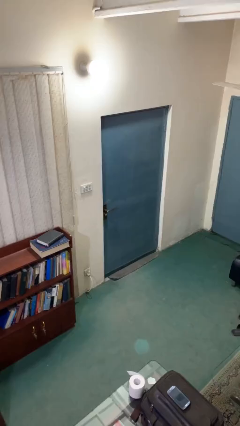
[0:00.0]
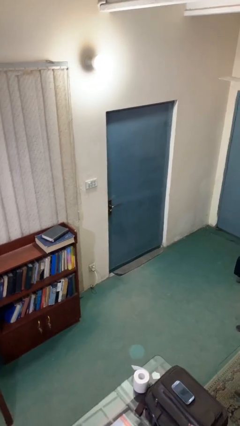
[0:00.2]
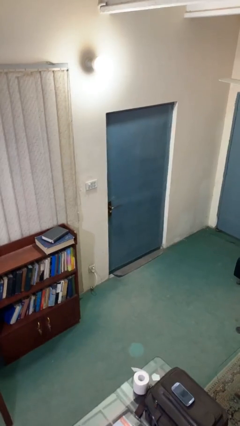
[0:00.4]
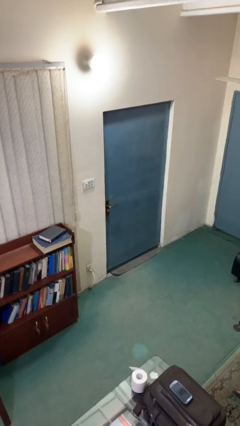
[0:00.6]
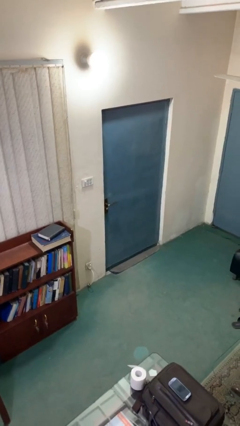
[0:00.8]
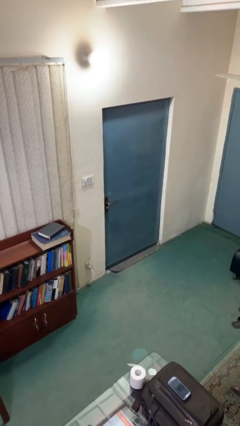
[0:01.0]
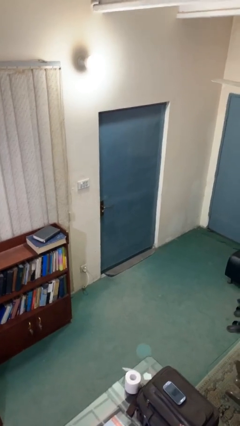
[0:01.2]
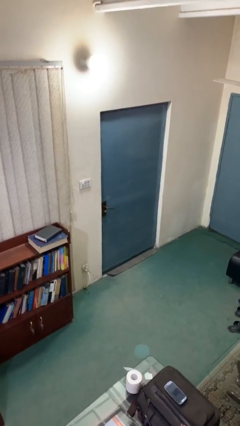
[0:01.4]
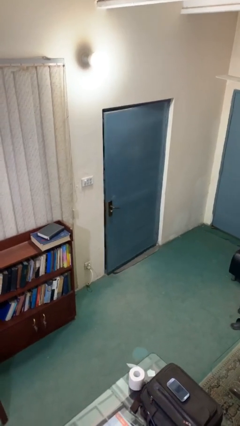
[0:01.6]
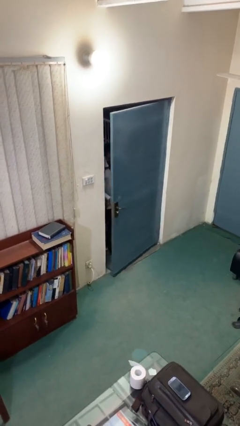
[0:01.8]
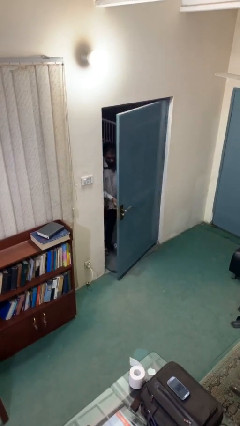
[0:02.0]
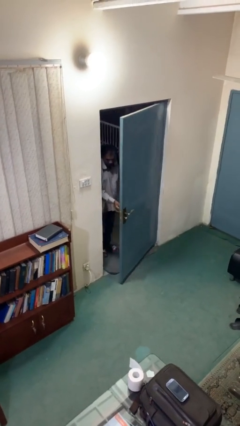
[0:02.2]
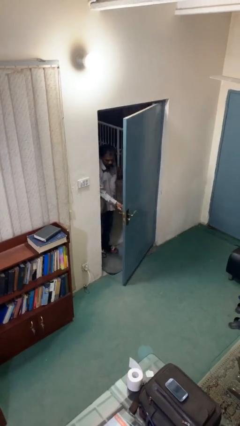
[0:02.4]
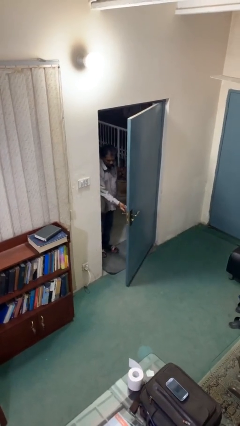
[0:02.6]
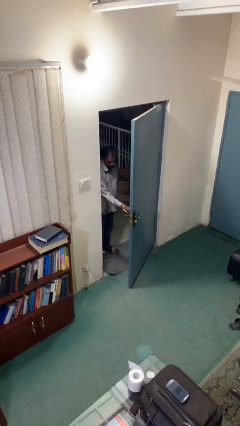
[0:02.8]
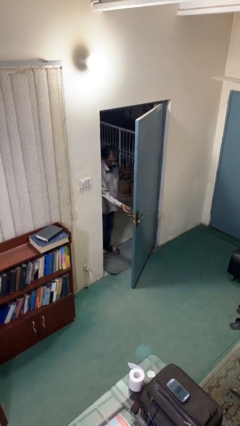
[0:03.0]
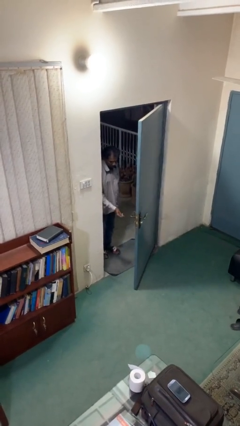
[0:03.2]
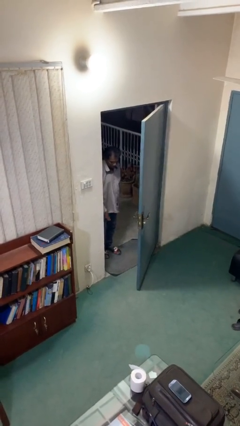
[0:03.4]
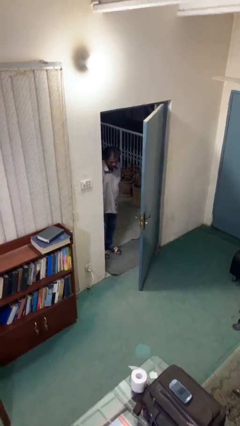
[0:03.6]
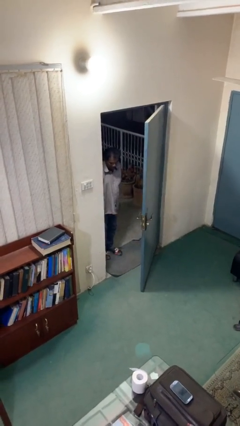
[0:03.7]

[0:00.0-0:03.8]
person opens facility door

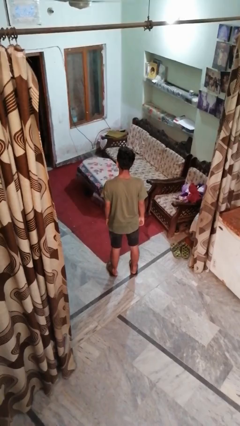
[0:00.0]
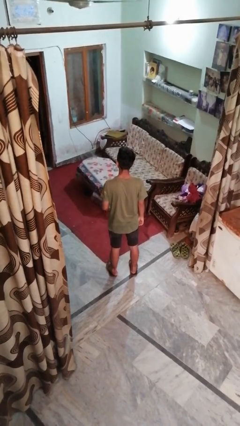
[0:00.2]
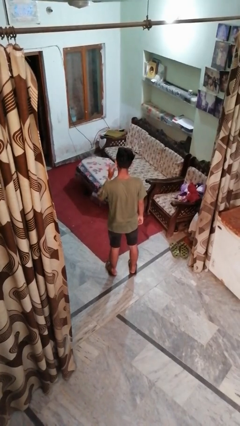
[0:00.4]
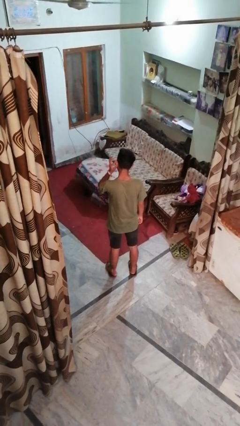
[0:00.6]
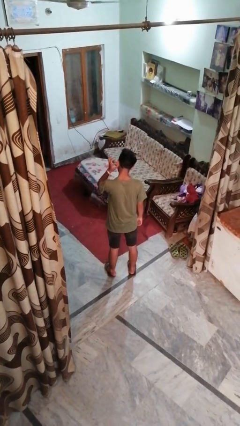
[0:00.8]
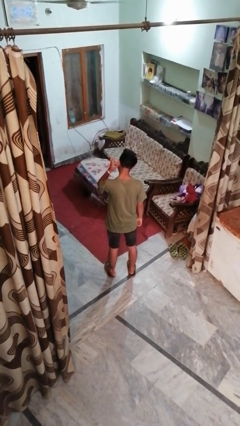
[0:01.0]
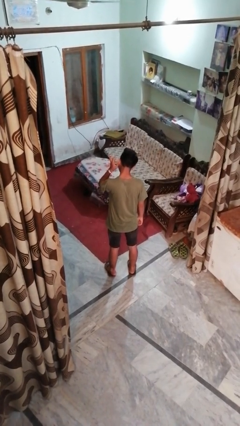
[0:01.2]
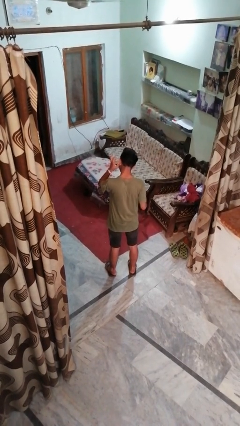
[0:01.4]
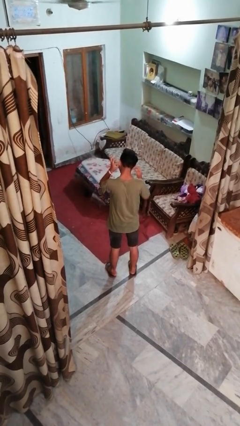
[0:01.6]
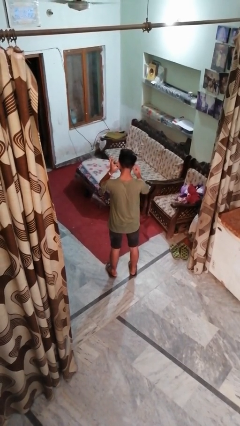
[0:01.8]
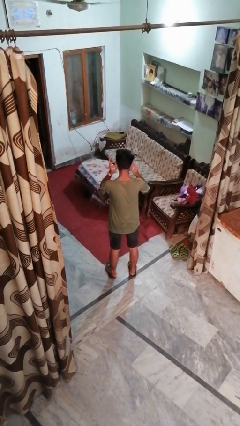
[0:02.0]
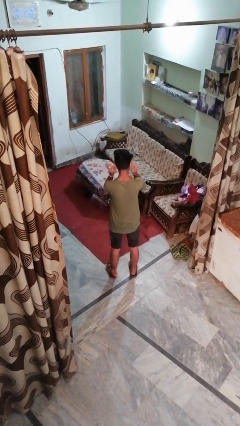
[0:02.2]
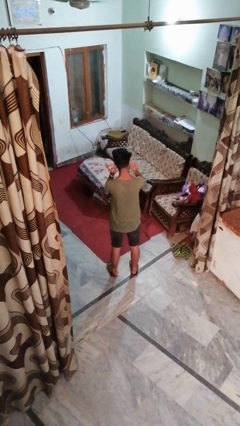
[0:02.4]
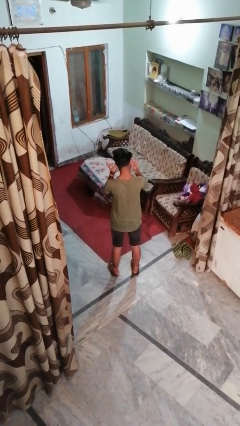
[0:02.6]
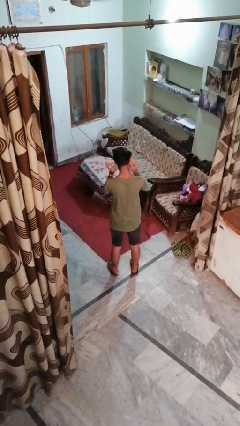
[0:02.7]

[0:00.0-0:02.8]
person touches earlobe

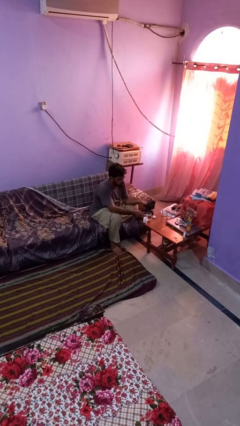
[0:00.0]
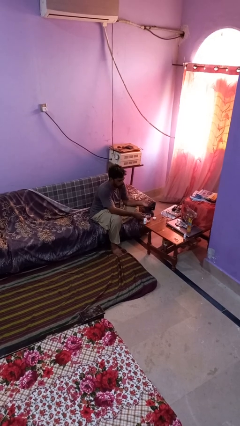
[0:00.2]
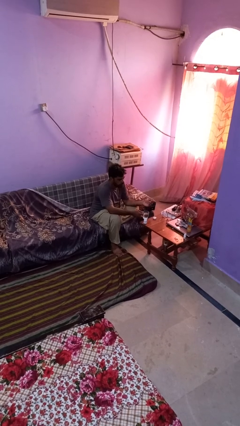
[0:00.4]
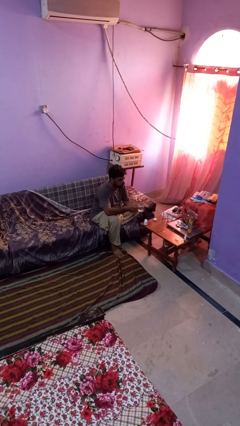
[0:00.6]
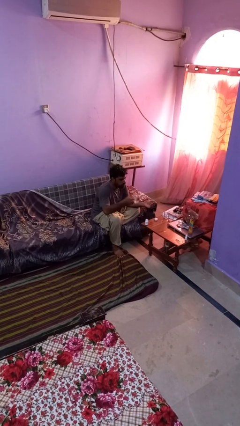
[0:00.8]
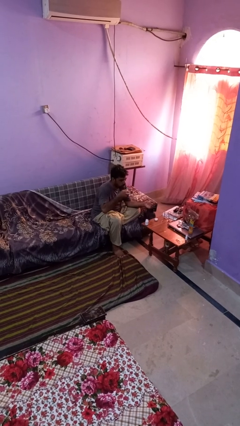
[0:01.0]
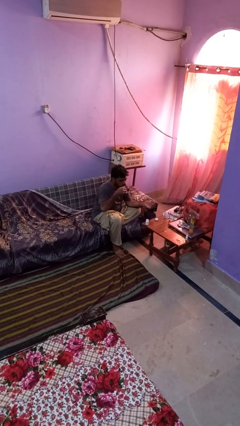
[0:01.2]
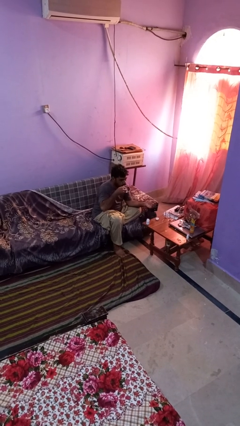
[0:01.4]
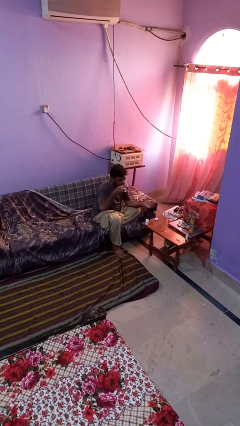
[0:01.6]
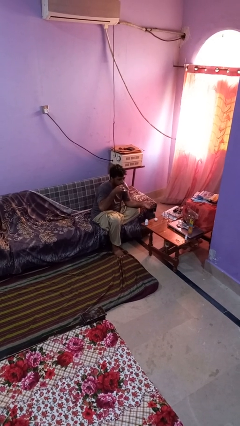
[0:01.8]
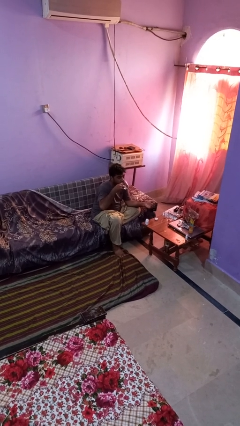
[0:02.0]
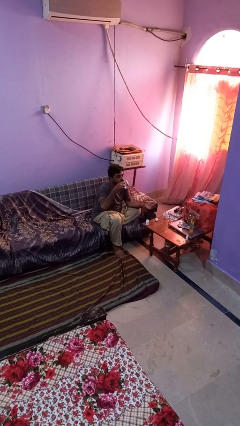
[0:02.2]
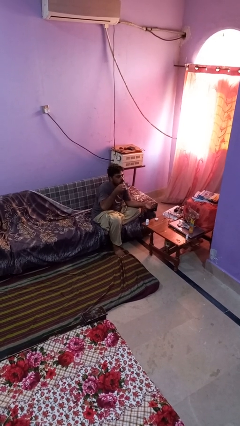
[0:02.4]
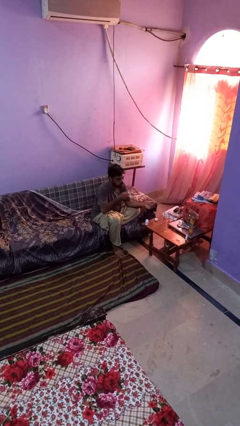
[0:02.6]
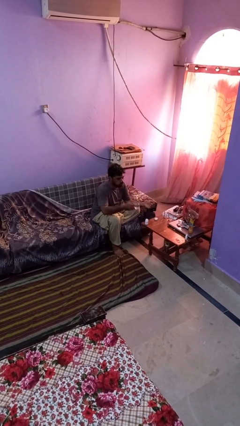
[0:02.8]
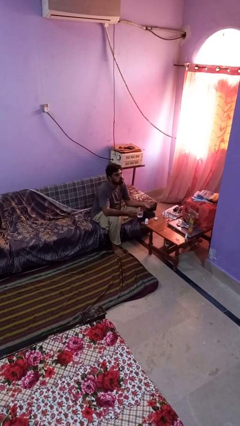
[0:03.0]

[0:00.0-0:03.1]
person drinks from cup

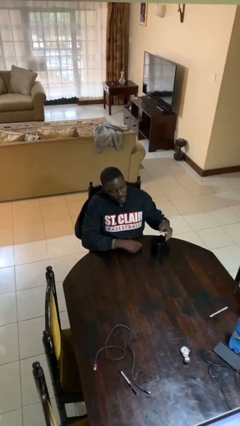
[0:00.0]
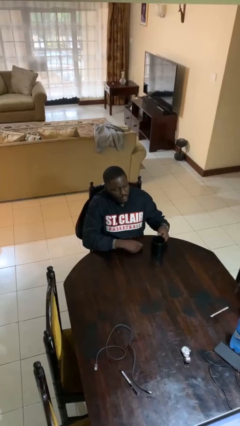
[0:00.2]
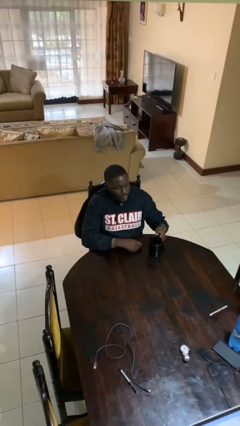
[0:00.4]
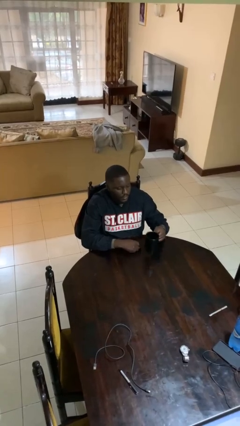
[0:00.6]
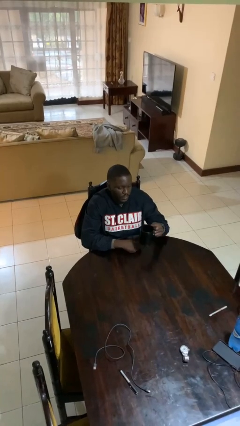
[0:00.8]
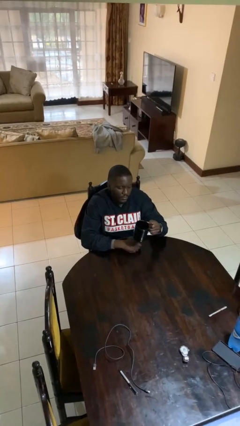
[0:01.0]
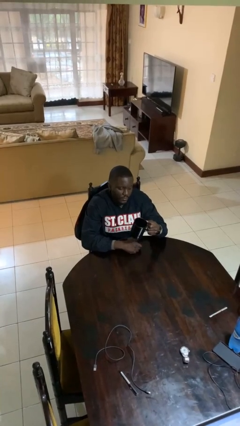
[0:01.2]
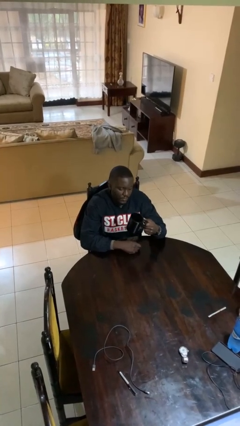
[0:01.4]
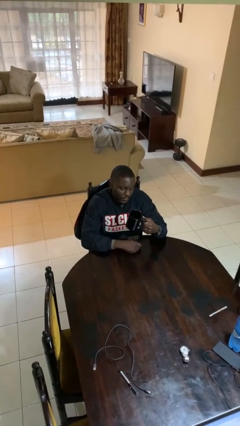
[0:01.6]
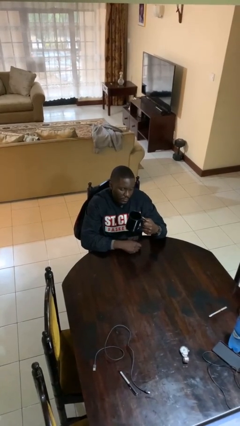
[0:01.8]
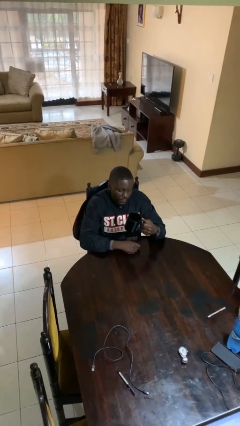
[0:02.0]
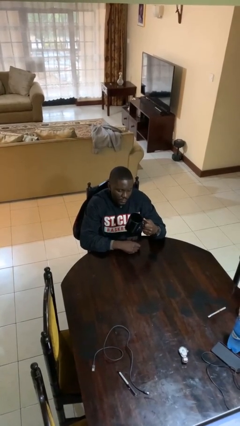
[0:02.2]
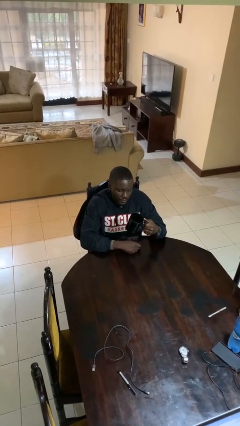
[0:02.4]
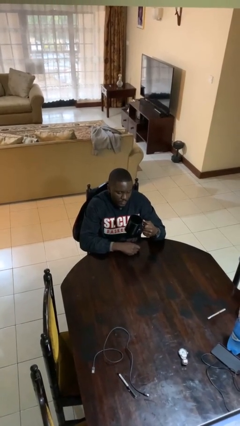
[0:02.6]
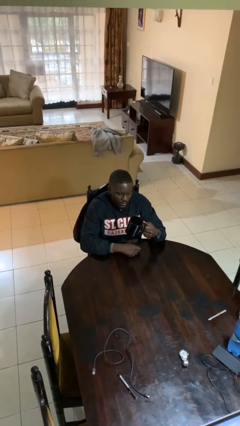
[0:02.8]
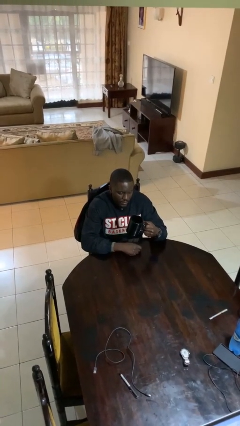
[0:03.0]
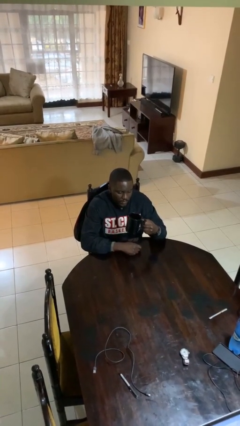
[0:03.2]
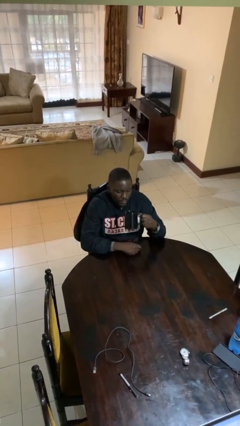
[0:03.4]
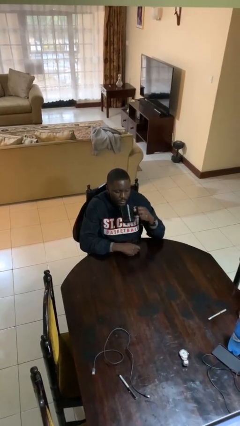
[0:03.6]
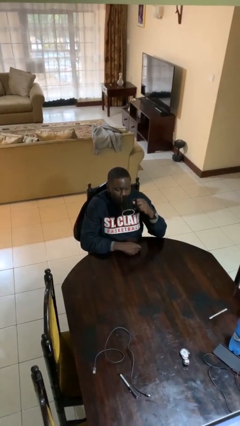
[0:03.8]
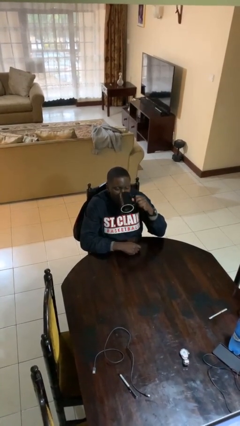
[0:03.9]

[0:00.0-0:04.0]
person picks up object from table

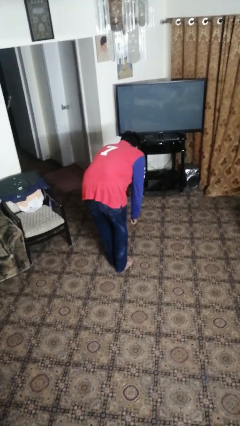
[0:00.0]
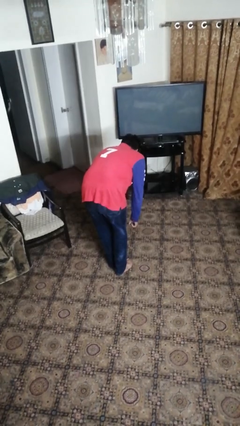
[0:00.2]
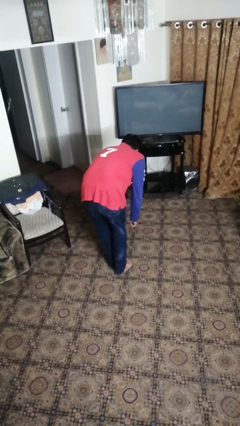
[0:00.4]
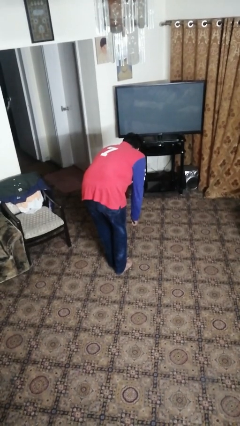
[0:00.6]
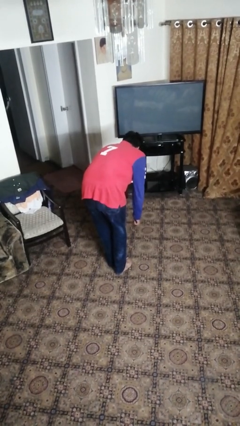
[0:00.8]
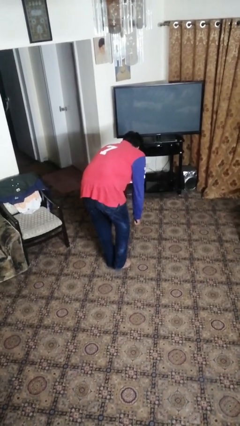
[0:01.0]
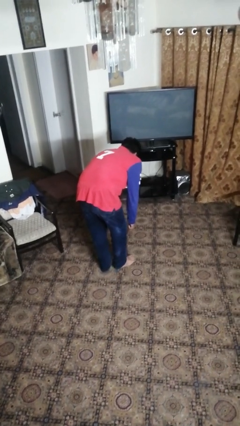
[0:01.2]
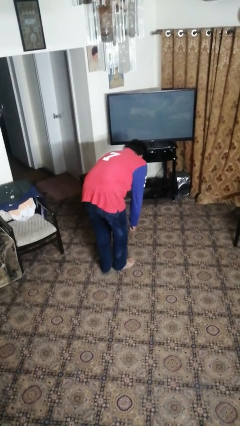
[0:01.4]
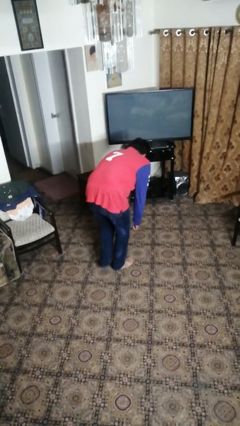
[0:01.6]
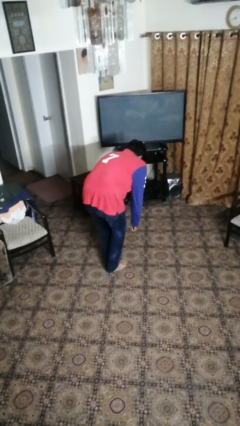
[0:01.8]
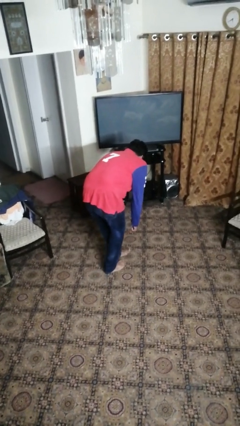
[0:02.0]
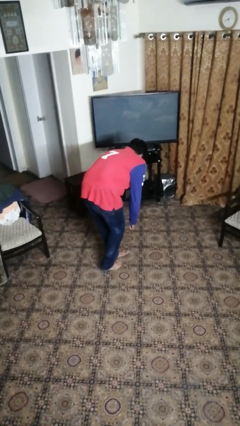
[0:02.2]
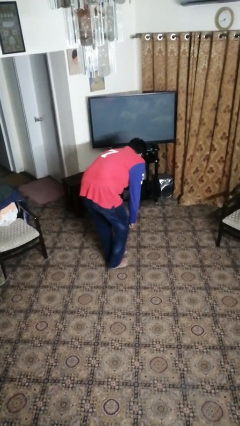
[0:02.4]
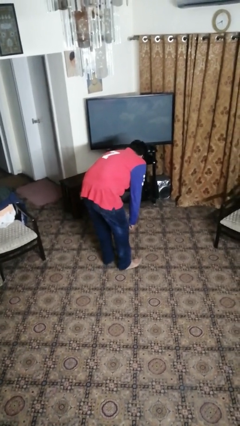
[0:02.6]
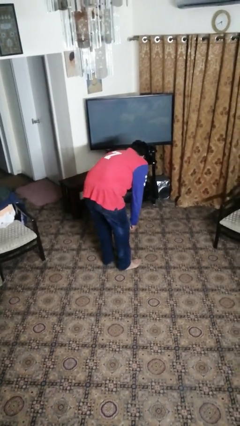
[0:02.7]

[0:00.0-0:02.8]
person walks tiptoe

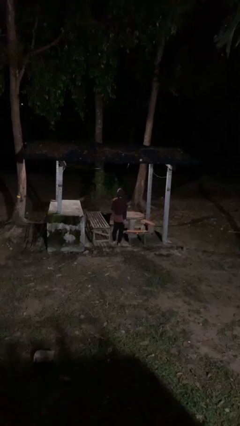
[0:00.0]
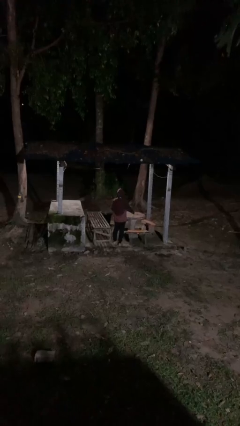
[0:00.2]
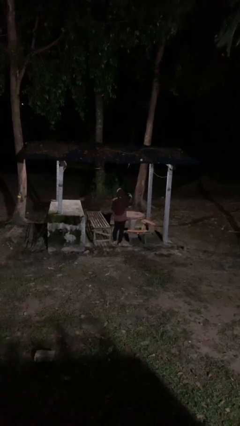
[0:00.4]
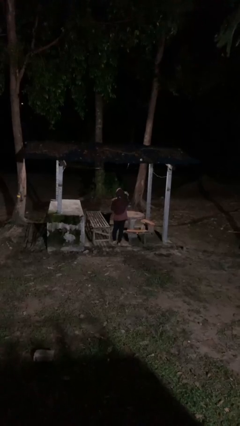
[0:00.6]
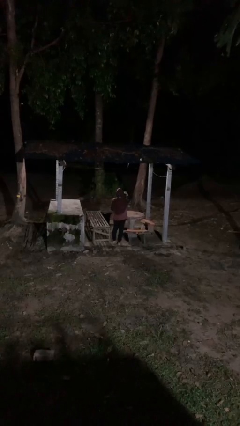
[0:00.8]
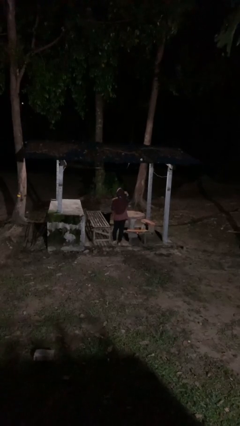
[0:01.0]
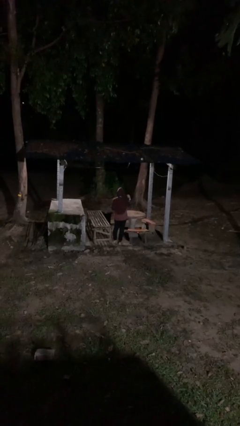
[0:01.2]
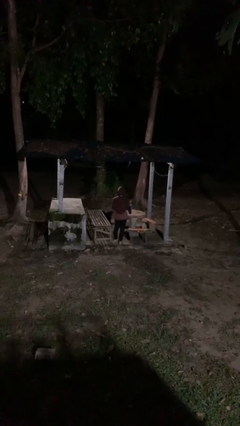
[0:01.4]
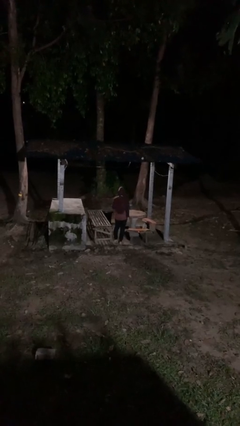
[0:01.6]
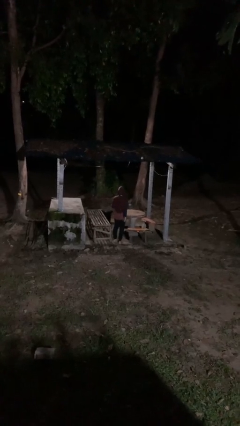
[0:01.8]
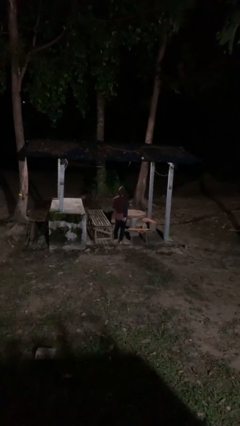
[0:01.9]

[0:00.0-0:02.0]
person gestures watch closely
